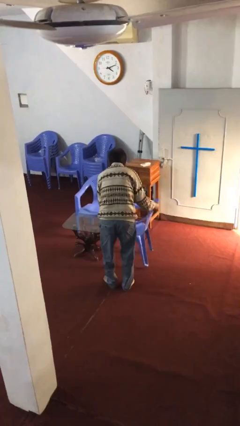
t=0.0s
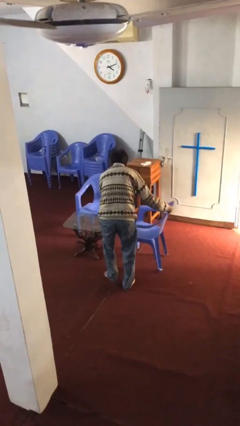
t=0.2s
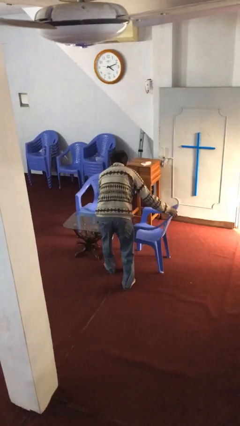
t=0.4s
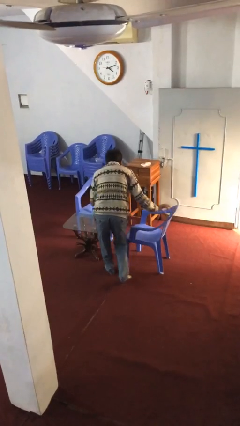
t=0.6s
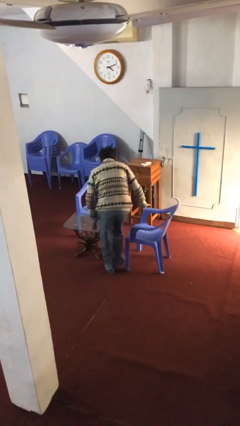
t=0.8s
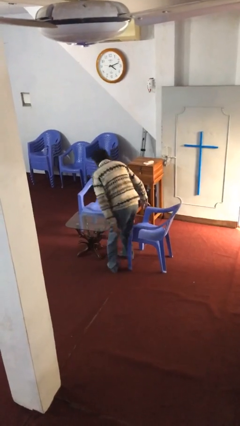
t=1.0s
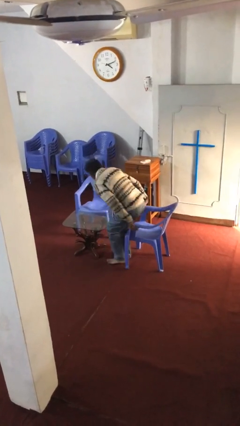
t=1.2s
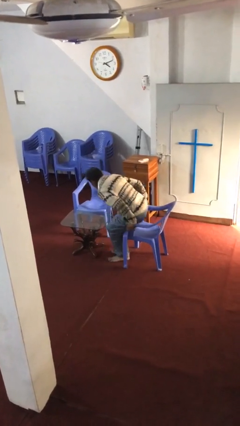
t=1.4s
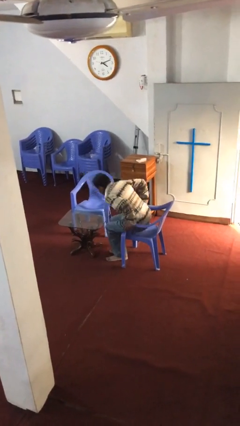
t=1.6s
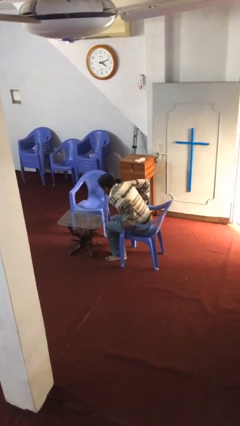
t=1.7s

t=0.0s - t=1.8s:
person sits down

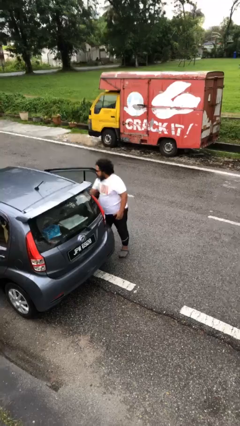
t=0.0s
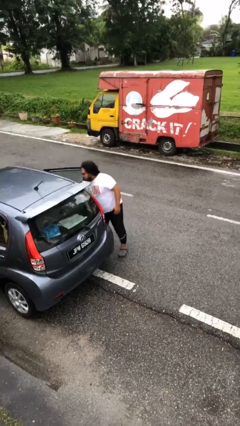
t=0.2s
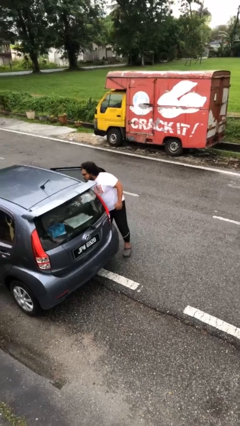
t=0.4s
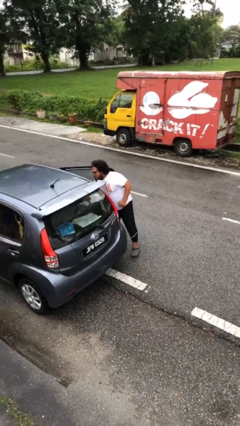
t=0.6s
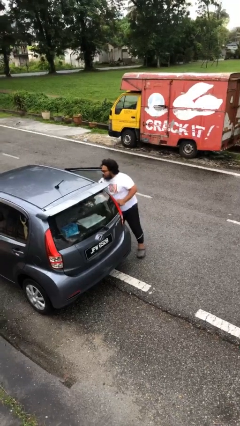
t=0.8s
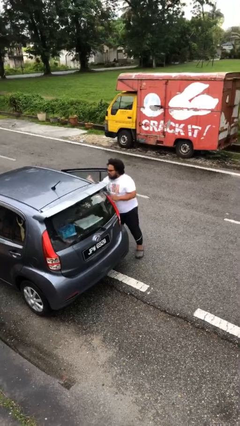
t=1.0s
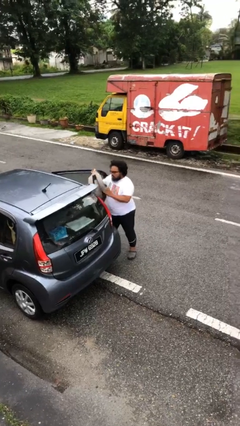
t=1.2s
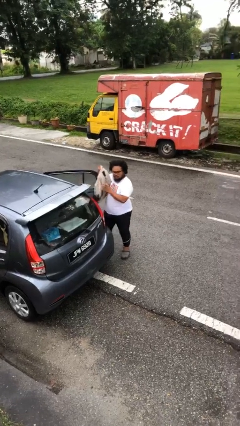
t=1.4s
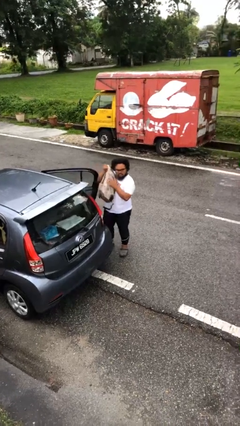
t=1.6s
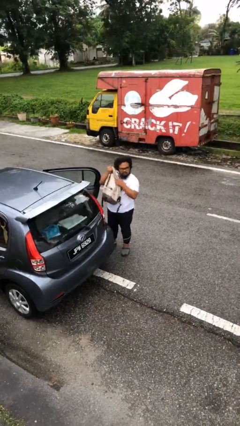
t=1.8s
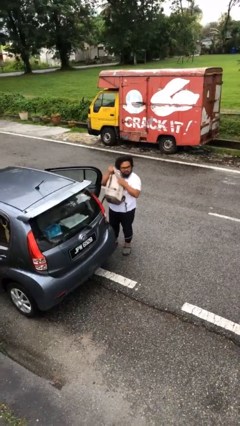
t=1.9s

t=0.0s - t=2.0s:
person unloads car

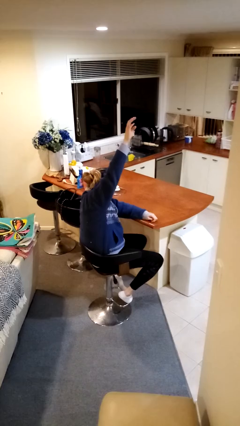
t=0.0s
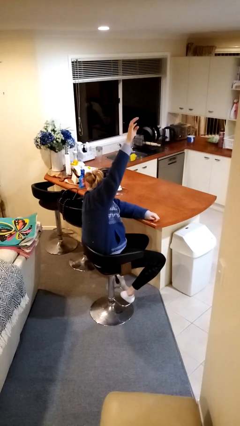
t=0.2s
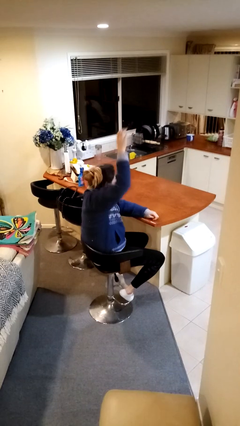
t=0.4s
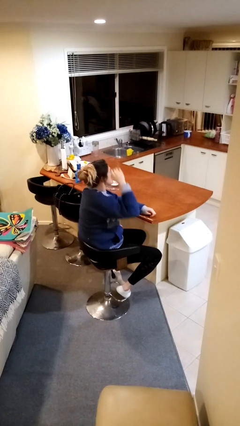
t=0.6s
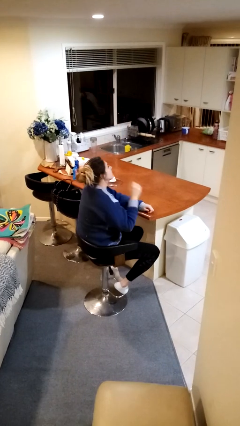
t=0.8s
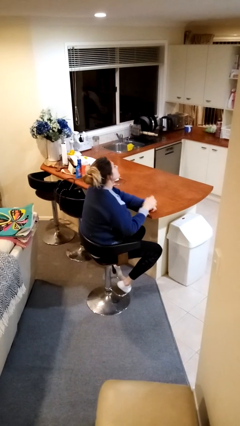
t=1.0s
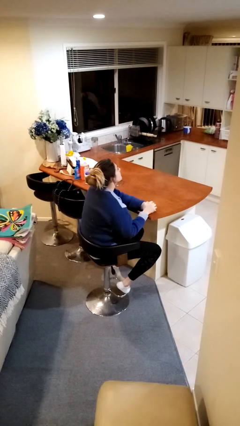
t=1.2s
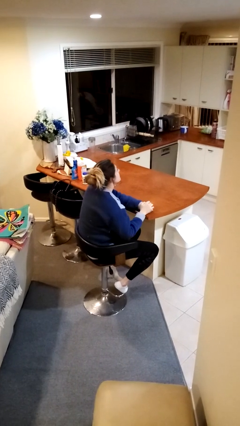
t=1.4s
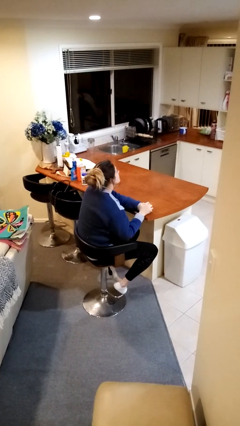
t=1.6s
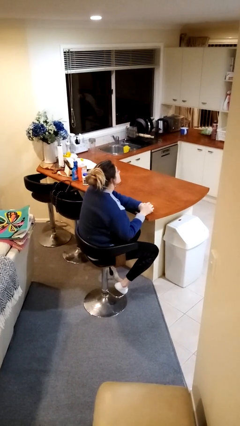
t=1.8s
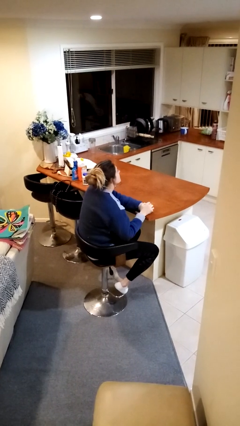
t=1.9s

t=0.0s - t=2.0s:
person gestures lower hand

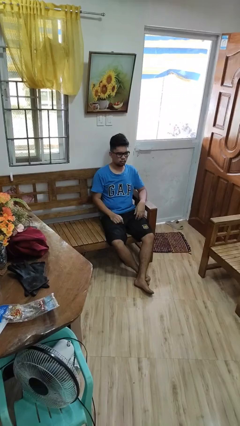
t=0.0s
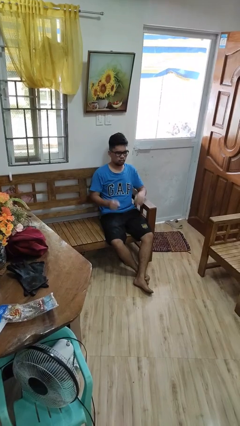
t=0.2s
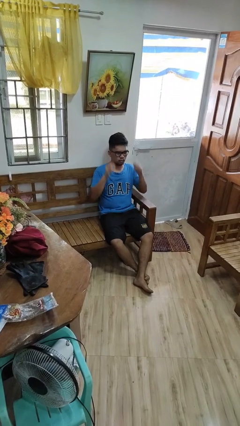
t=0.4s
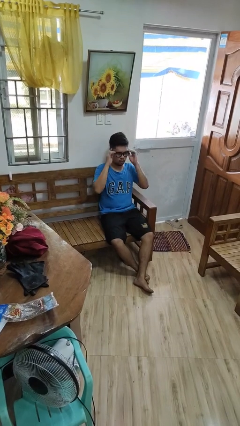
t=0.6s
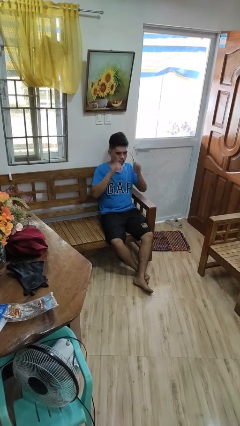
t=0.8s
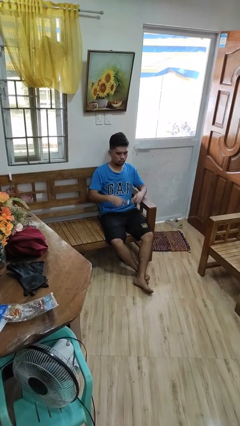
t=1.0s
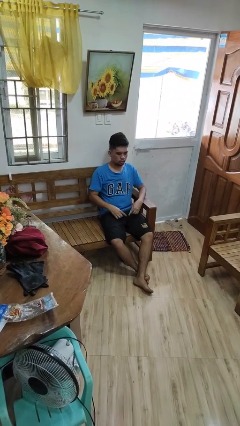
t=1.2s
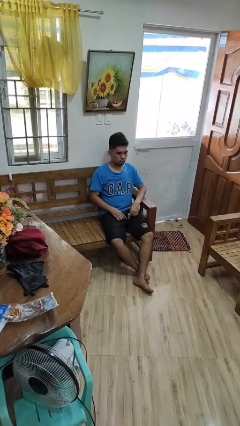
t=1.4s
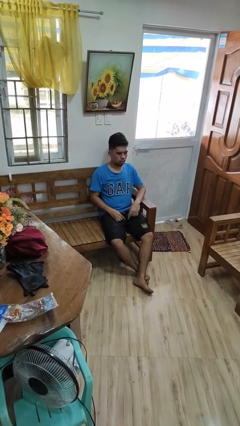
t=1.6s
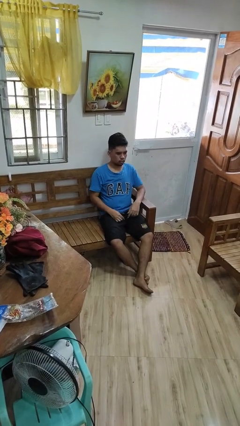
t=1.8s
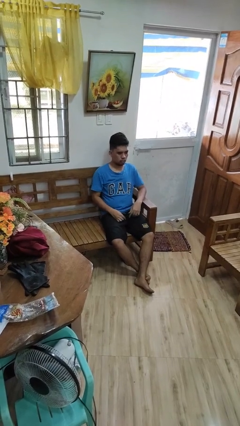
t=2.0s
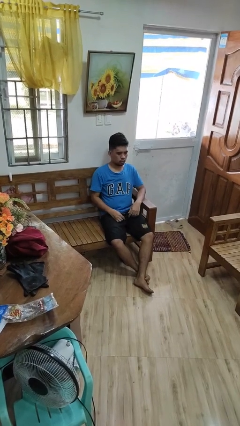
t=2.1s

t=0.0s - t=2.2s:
person takes off glasses

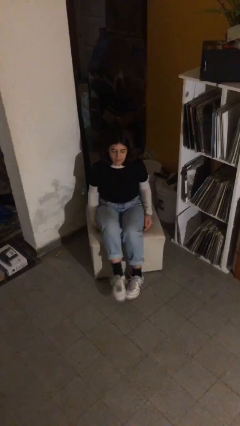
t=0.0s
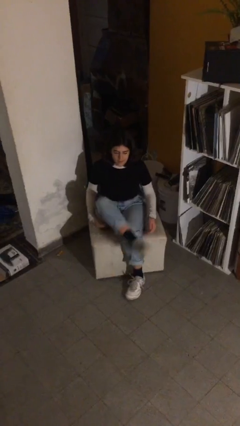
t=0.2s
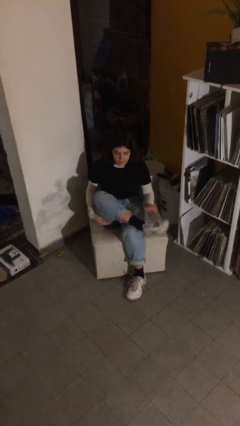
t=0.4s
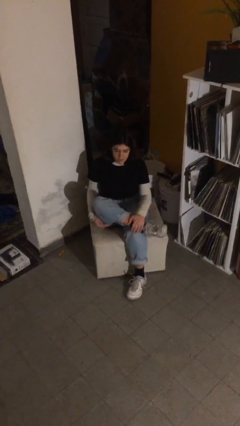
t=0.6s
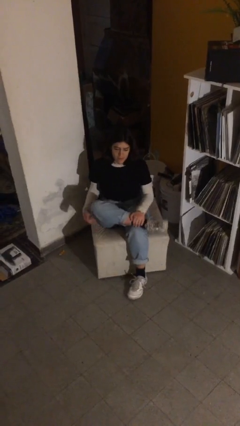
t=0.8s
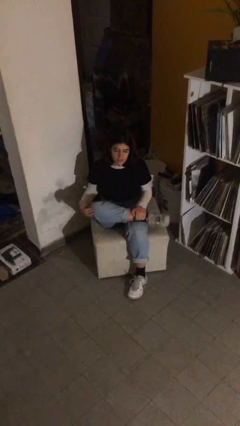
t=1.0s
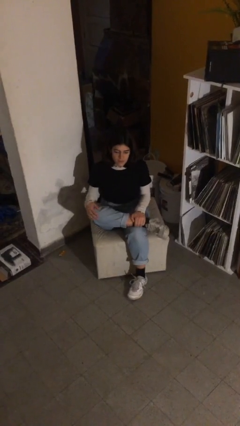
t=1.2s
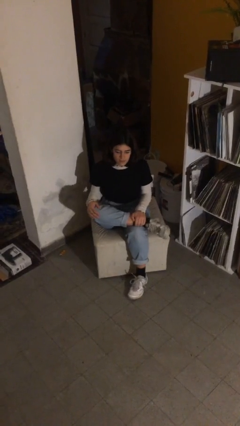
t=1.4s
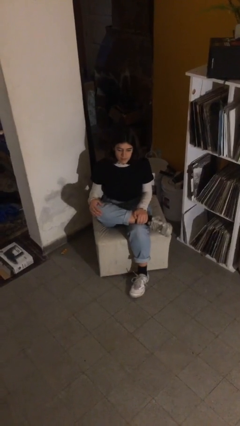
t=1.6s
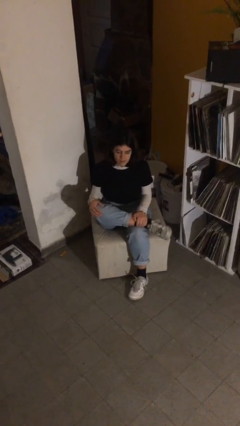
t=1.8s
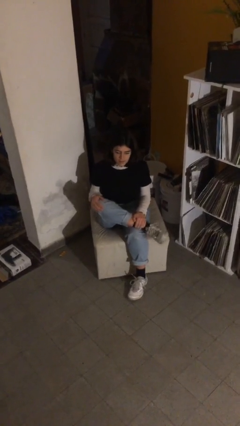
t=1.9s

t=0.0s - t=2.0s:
person crosses legs

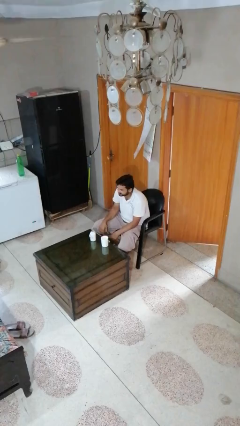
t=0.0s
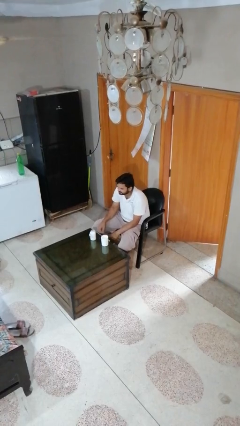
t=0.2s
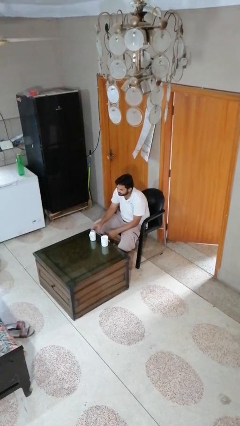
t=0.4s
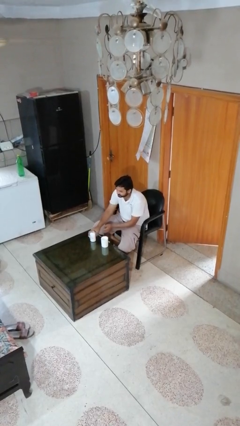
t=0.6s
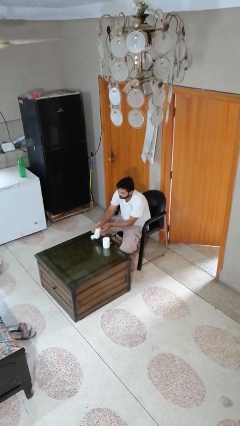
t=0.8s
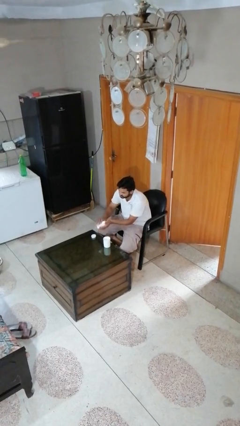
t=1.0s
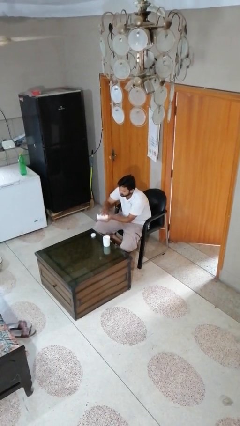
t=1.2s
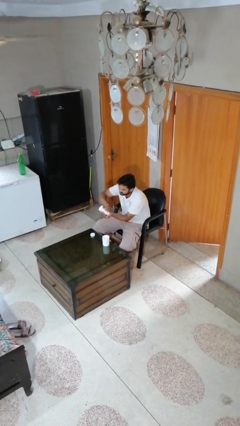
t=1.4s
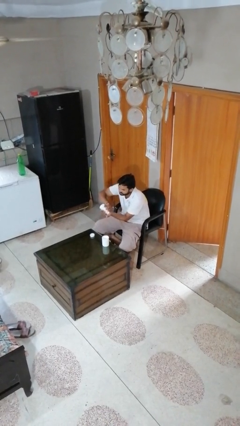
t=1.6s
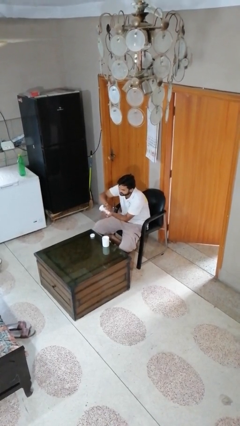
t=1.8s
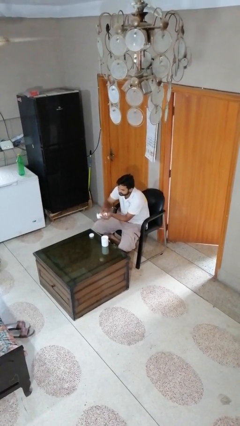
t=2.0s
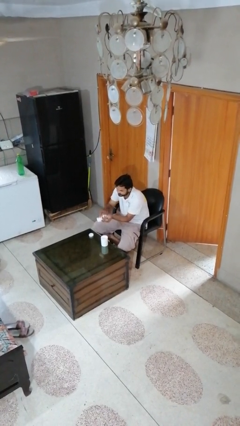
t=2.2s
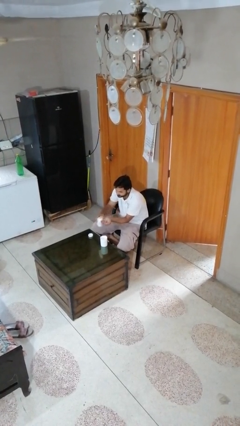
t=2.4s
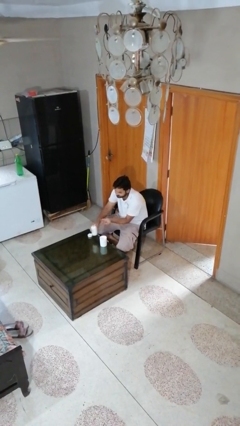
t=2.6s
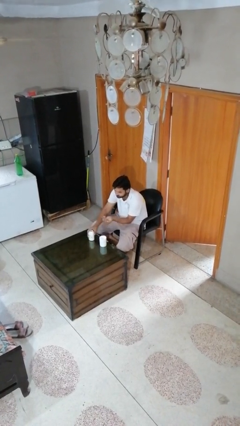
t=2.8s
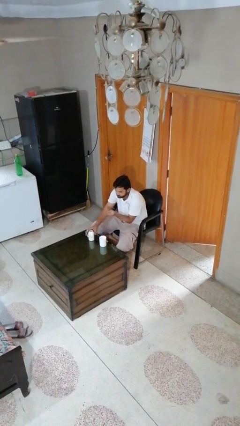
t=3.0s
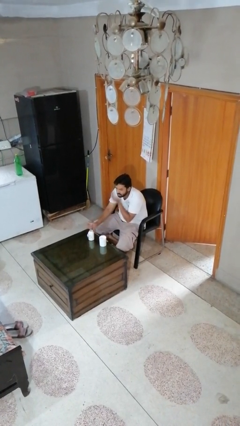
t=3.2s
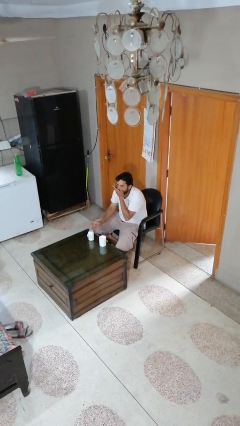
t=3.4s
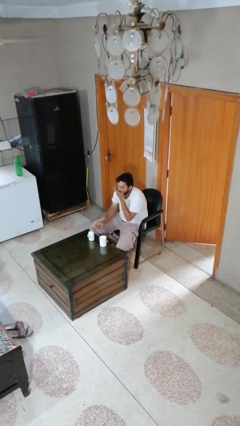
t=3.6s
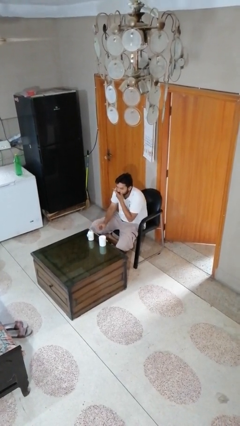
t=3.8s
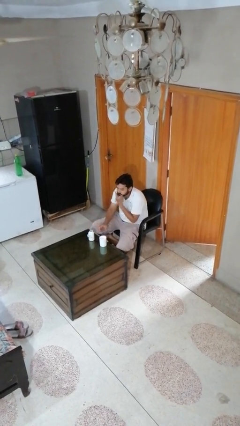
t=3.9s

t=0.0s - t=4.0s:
person takes medicine pills

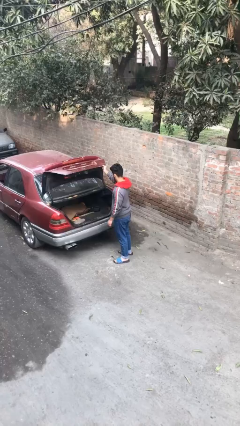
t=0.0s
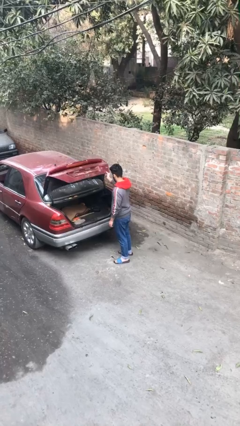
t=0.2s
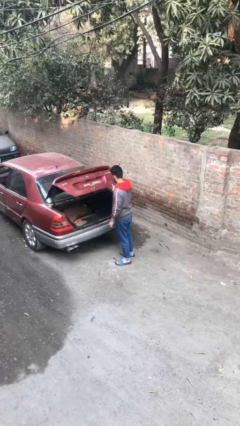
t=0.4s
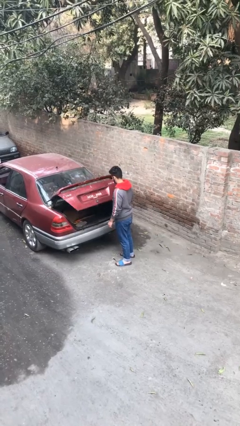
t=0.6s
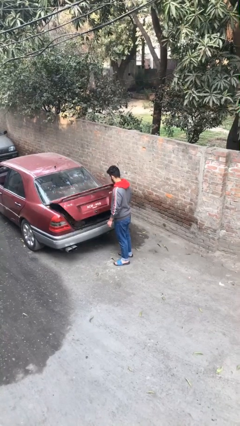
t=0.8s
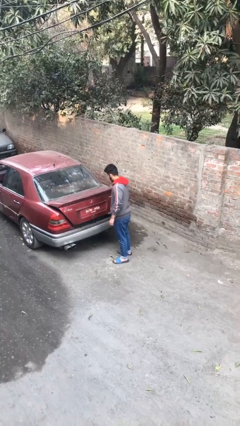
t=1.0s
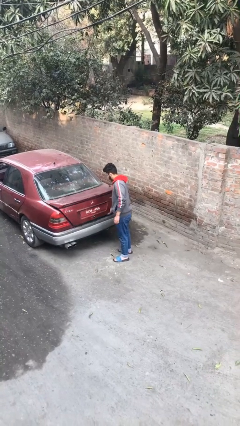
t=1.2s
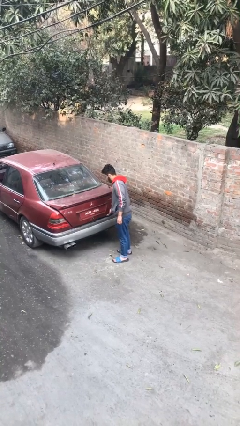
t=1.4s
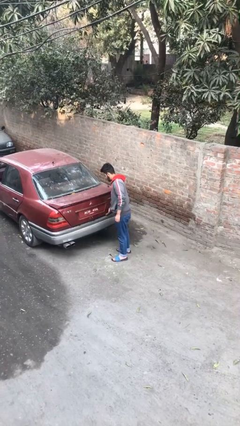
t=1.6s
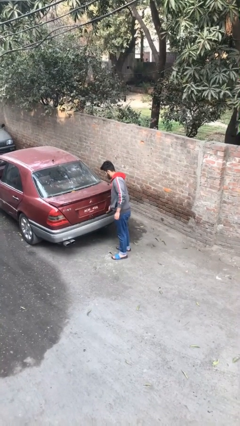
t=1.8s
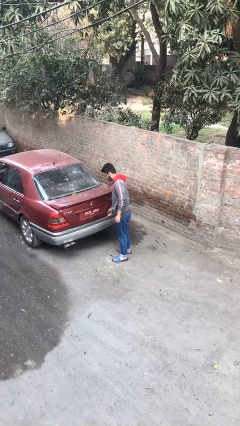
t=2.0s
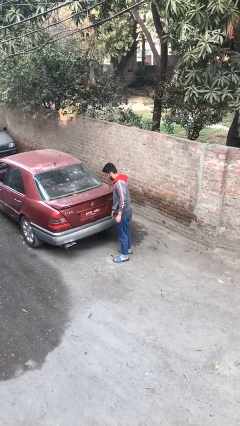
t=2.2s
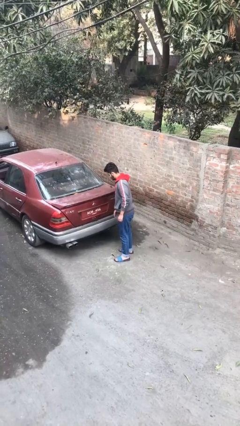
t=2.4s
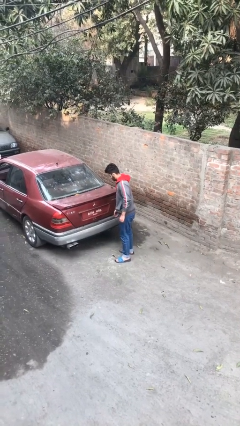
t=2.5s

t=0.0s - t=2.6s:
person closes car trunk

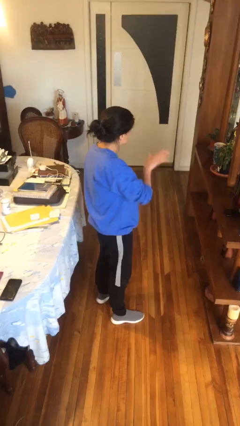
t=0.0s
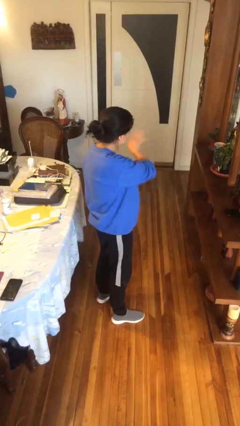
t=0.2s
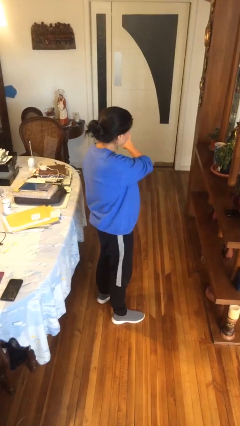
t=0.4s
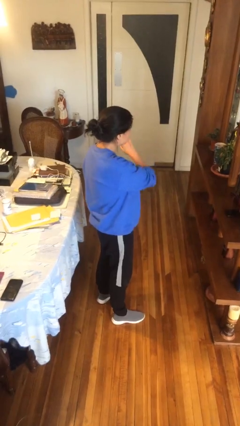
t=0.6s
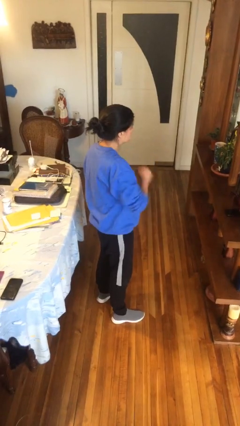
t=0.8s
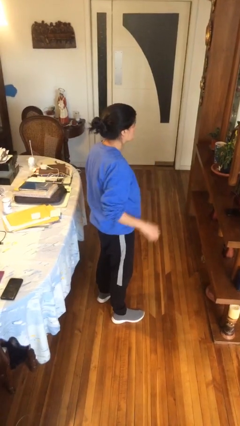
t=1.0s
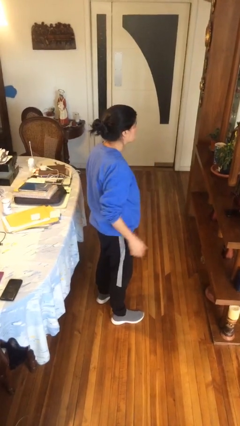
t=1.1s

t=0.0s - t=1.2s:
person gestures swipe left
